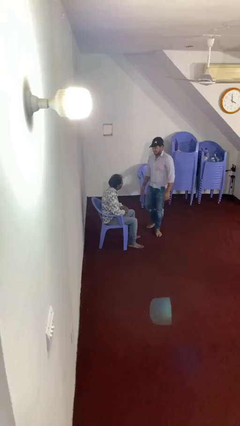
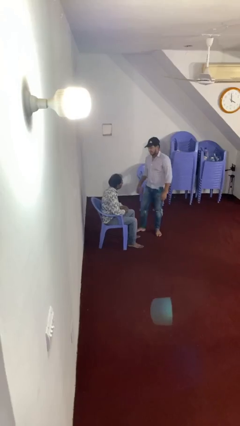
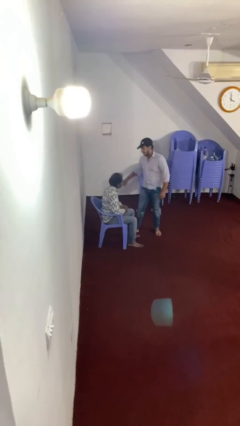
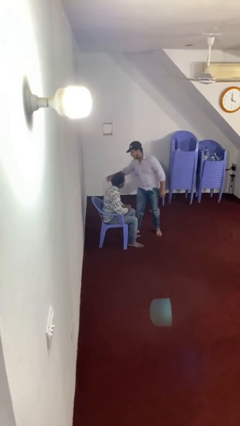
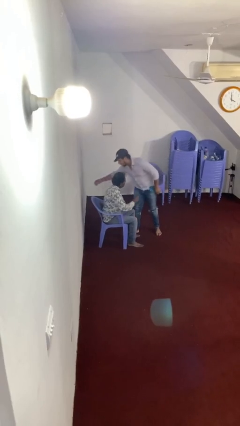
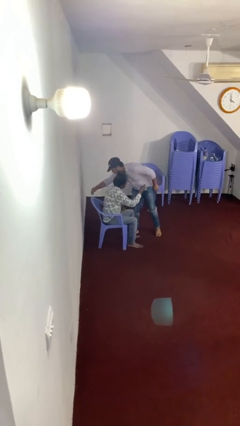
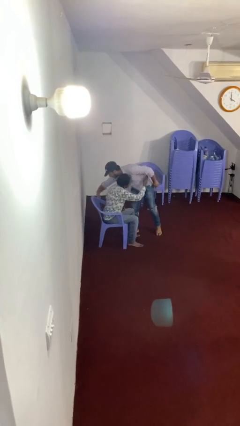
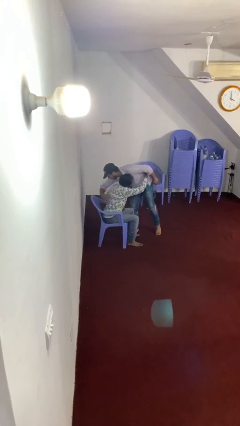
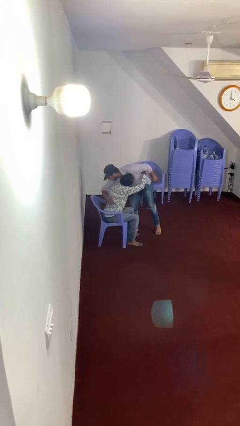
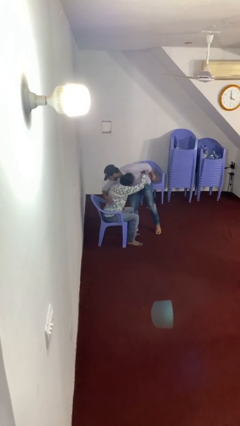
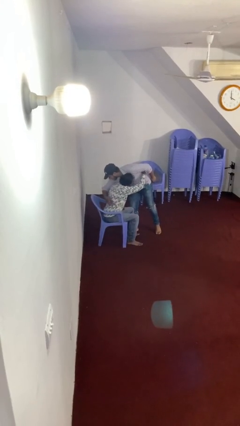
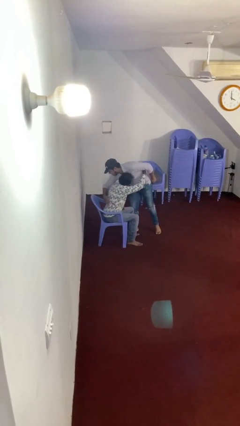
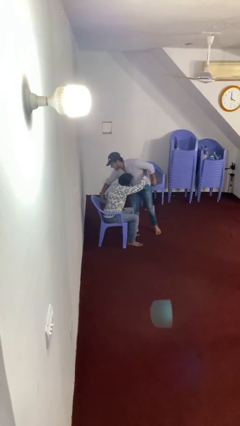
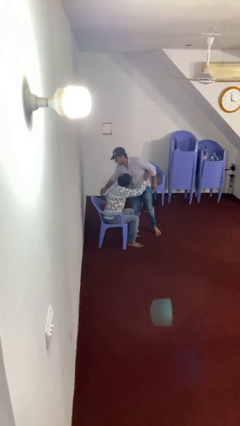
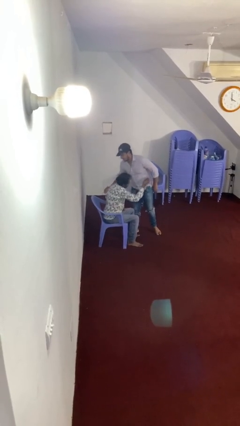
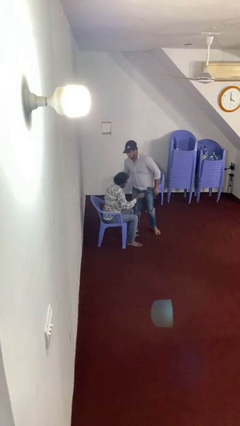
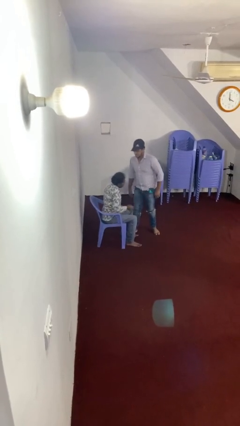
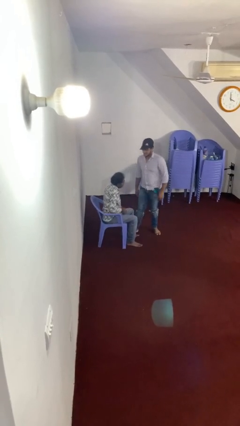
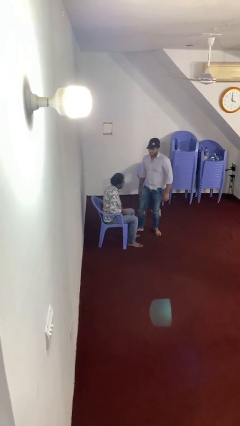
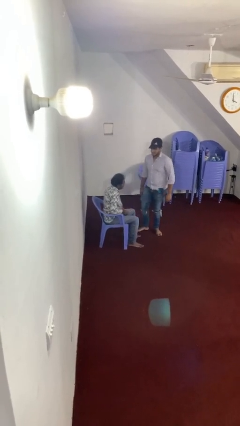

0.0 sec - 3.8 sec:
person embraces person

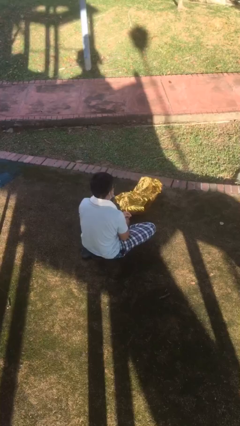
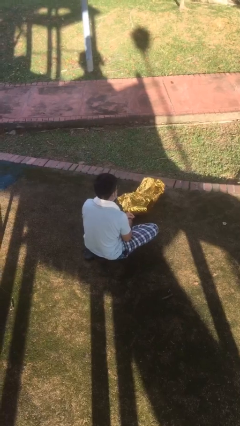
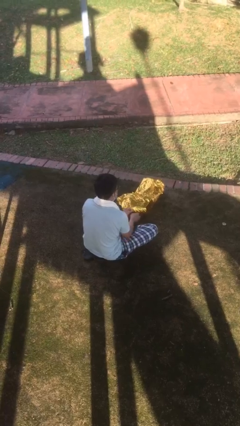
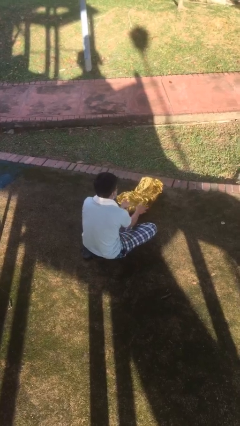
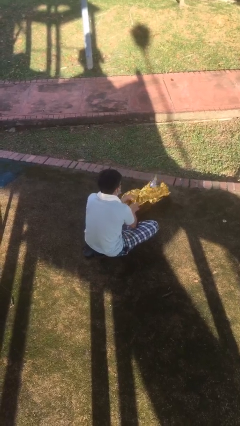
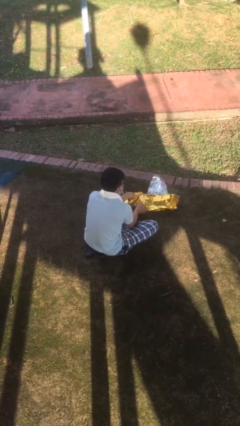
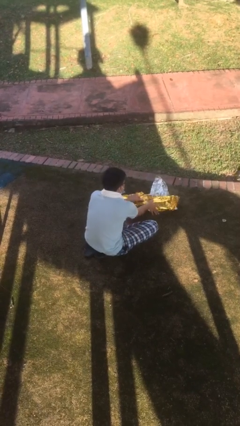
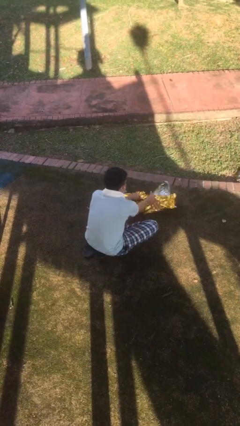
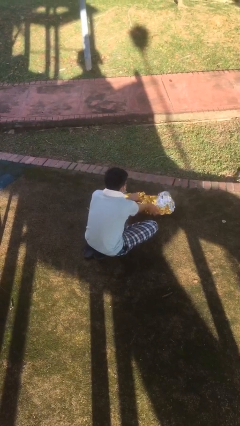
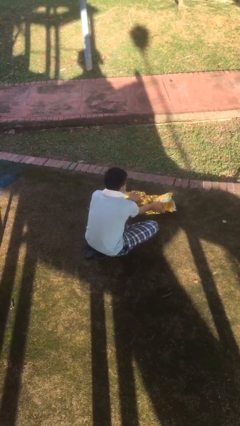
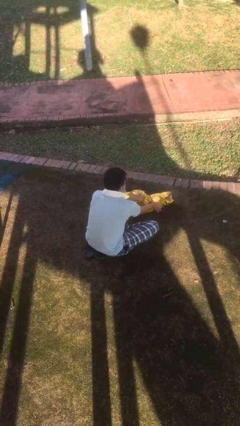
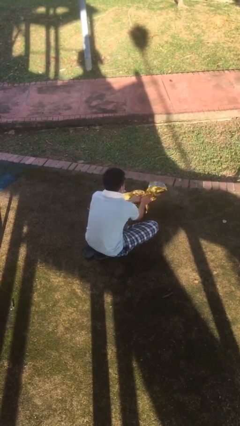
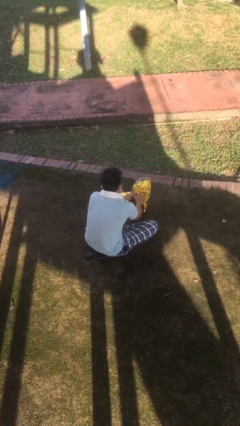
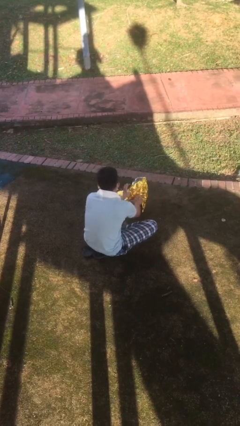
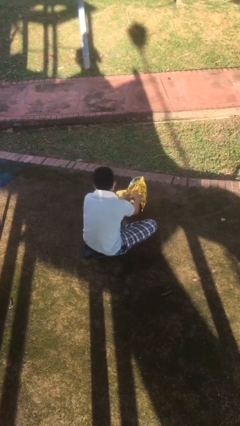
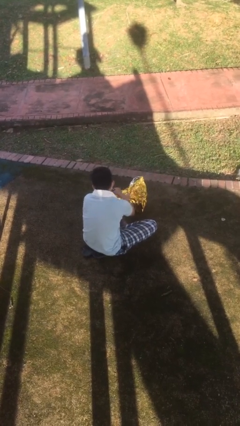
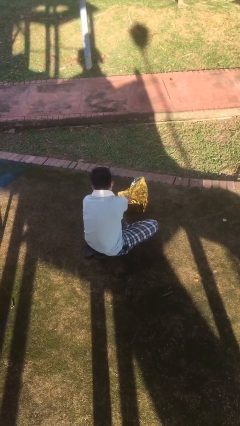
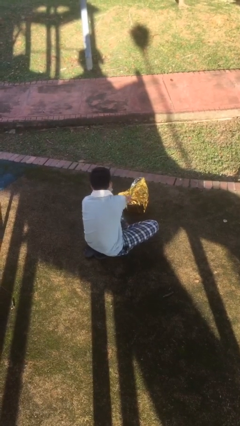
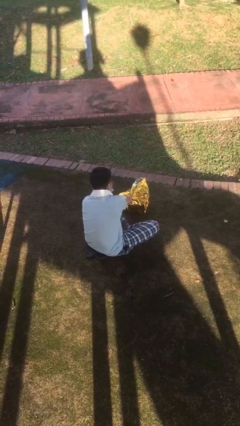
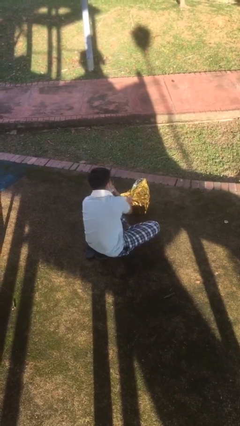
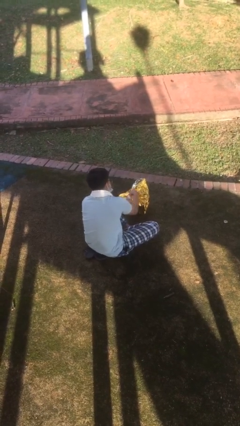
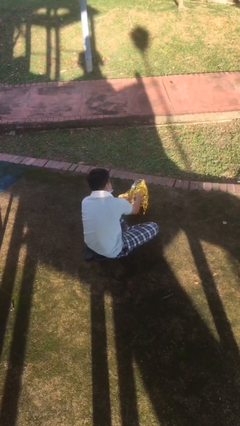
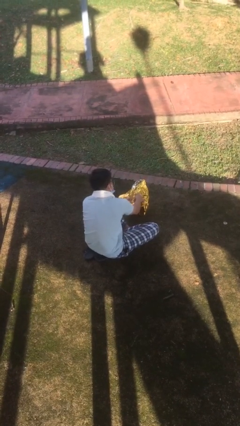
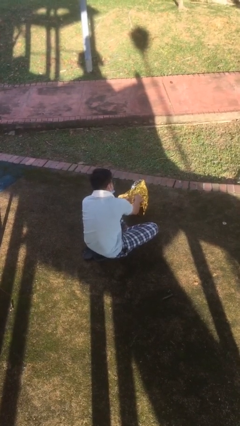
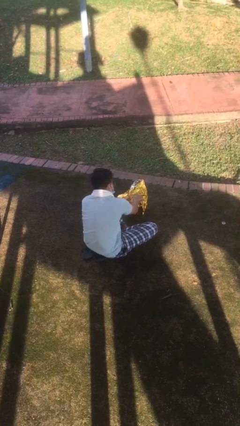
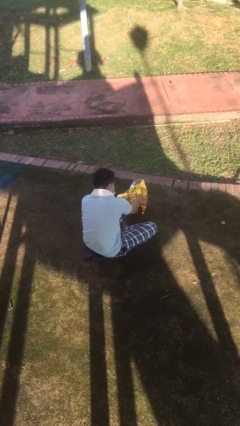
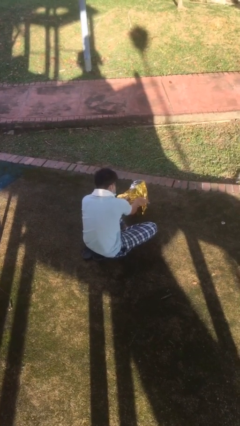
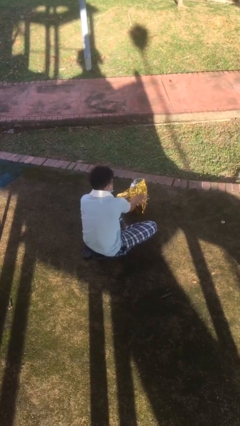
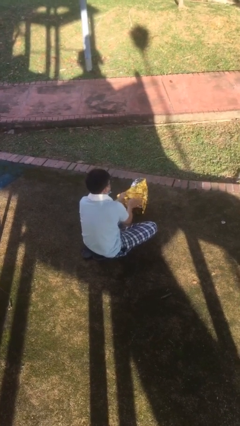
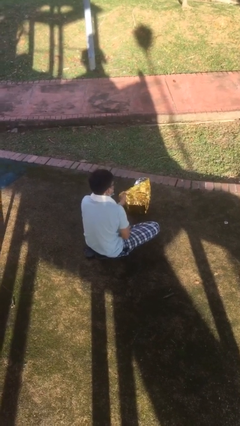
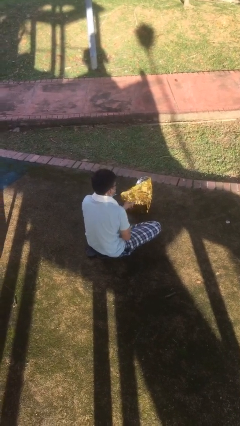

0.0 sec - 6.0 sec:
person wraps box

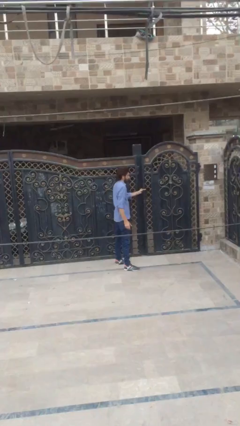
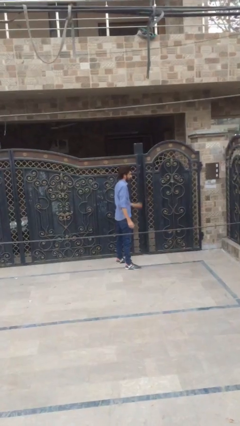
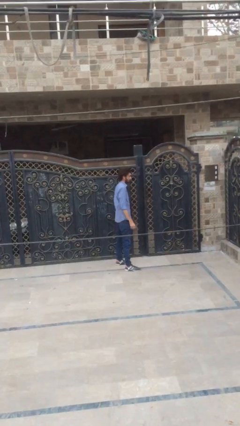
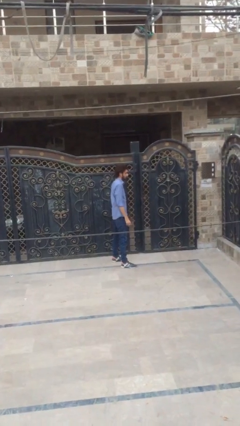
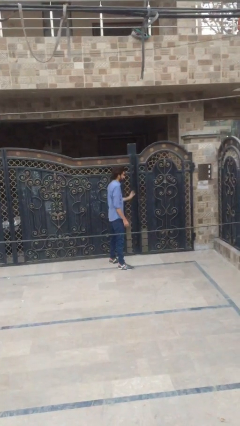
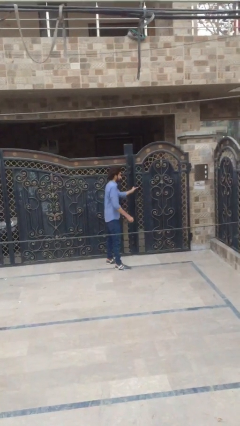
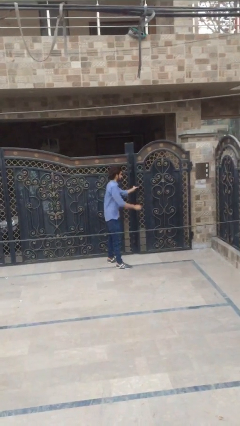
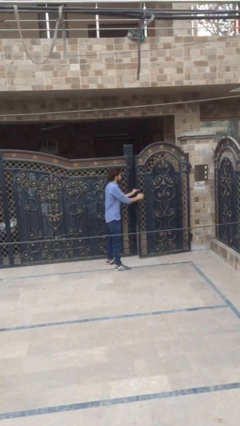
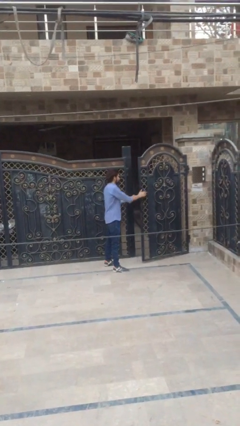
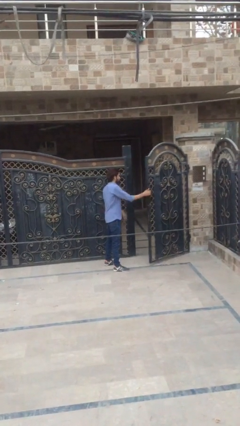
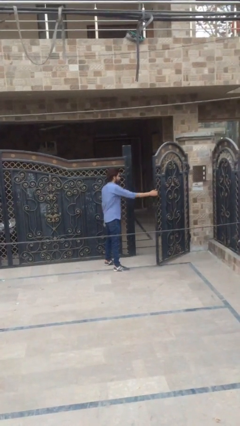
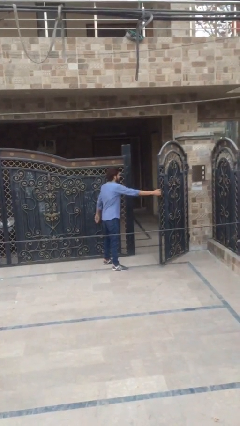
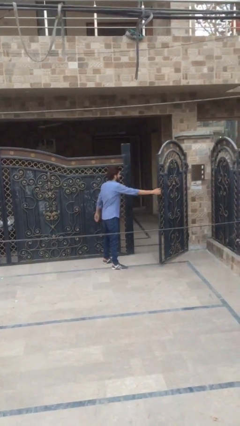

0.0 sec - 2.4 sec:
person opens facility door

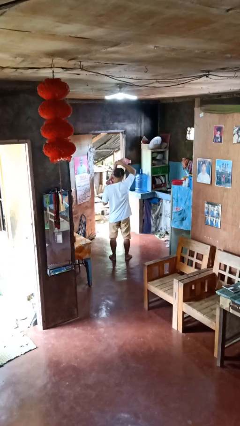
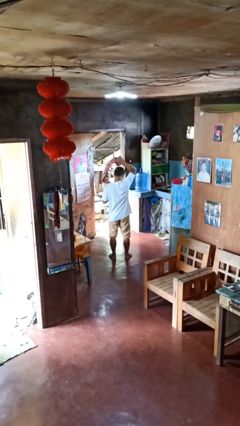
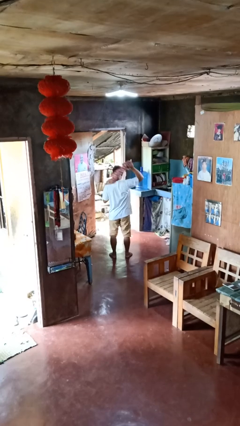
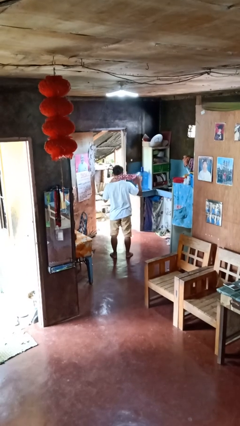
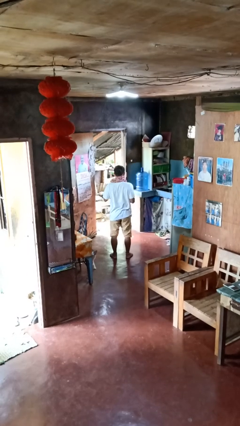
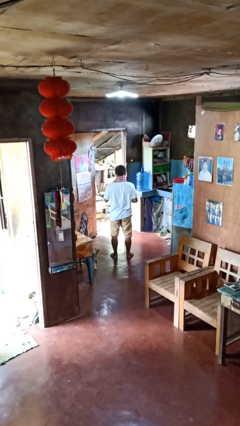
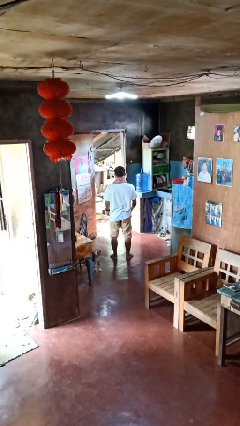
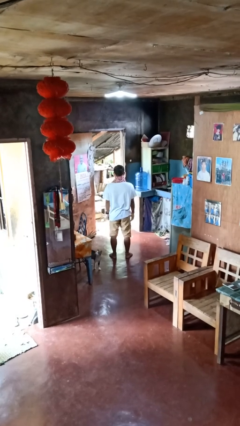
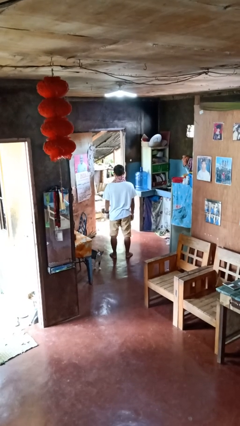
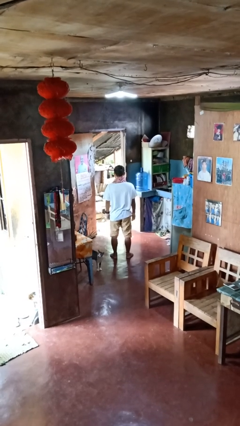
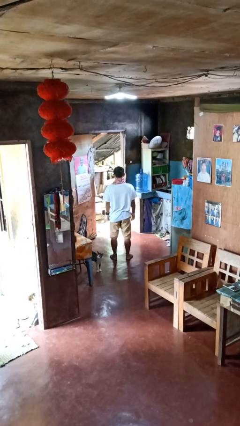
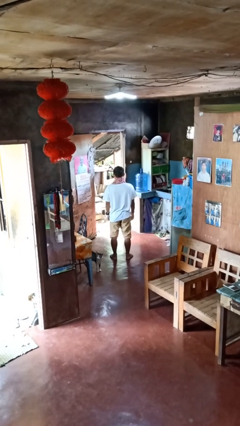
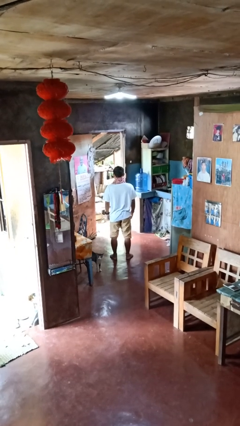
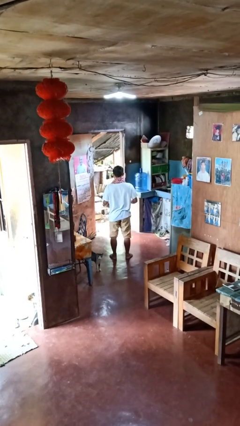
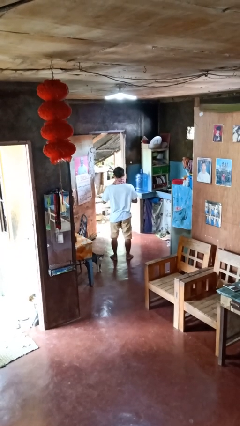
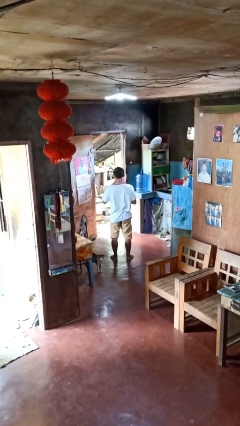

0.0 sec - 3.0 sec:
person puts on scarf

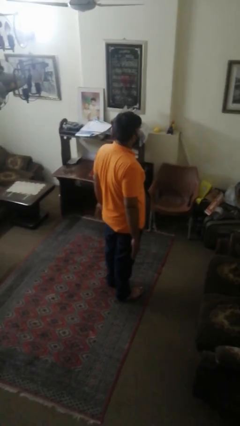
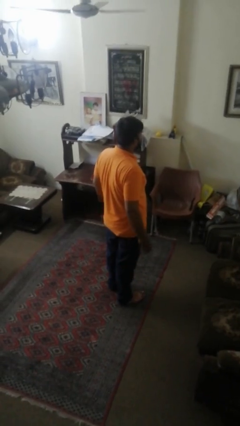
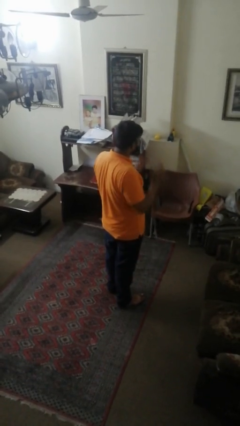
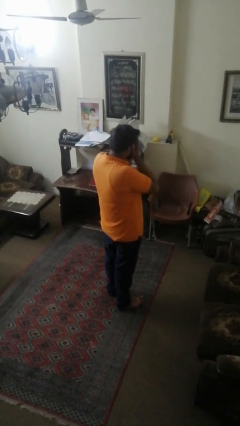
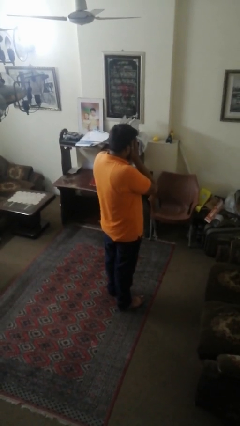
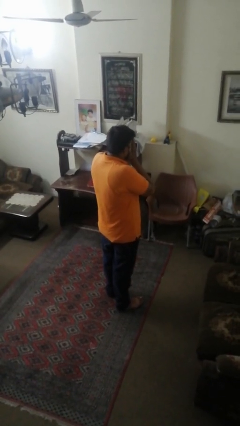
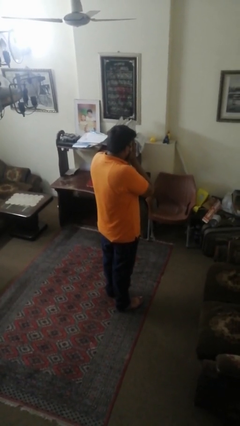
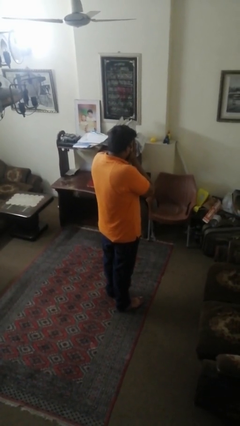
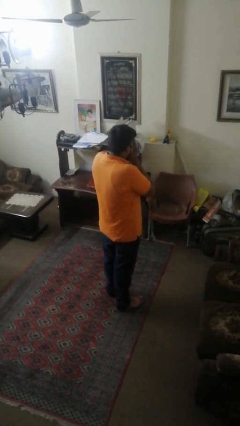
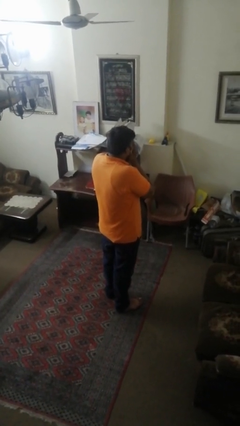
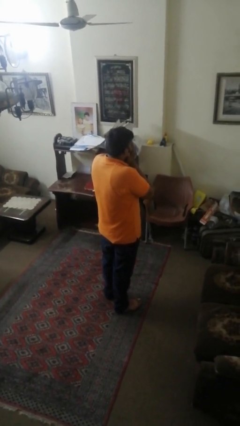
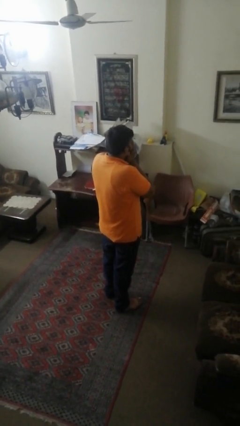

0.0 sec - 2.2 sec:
person covers face with hands

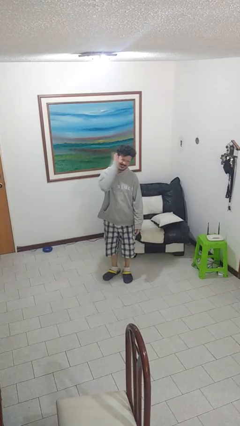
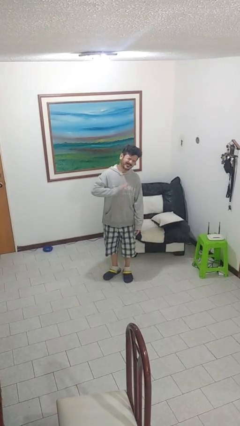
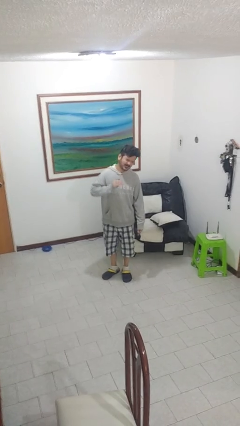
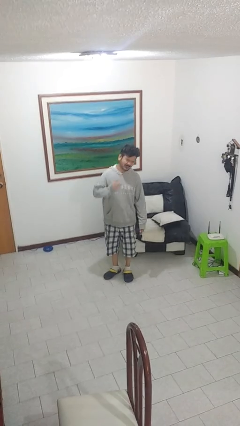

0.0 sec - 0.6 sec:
person swats bug
